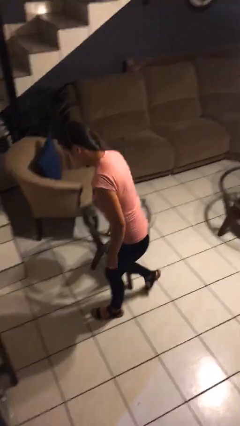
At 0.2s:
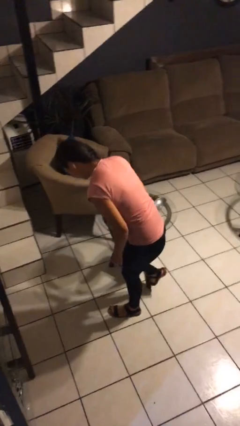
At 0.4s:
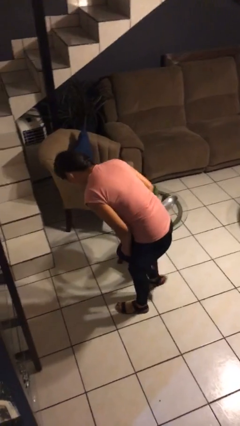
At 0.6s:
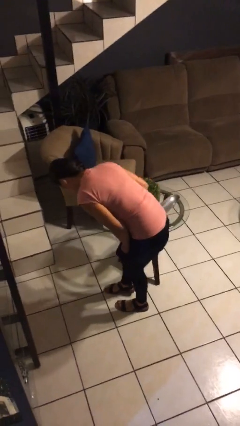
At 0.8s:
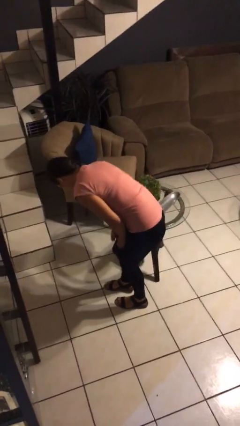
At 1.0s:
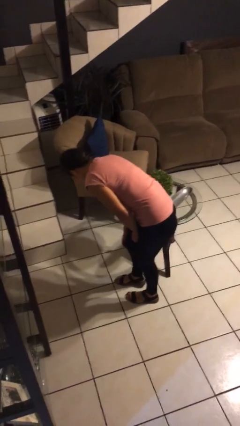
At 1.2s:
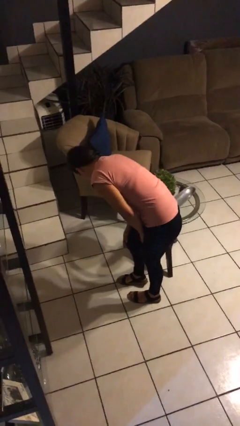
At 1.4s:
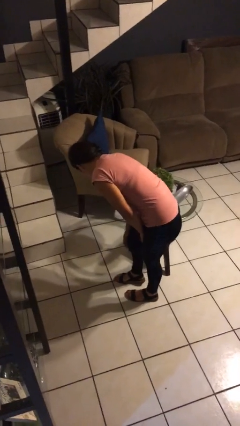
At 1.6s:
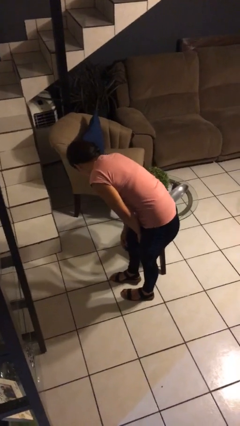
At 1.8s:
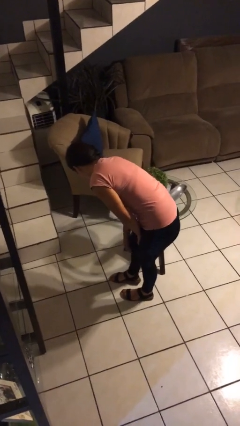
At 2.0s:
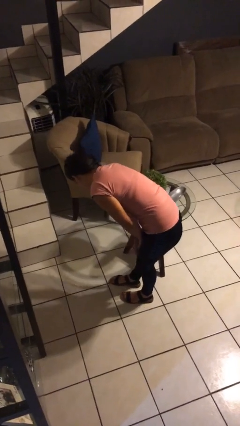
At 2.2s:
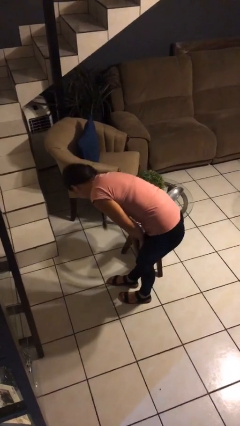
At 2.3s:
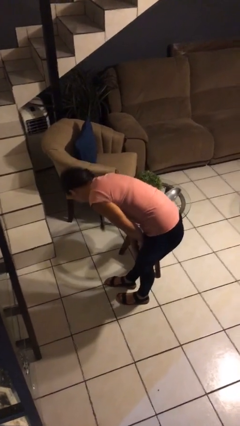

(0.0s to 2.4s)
person bumps into table

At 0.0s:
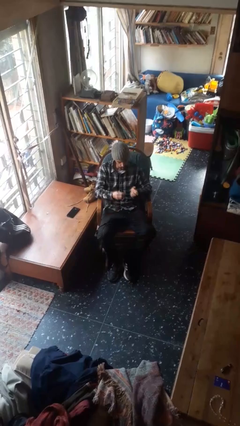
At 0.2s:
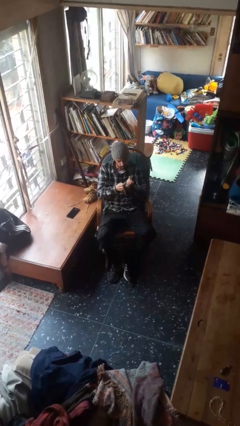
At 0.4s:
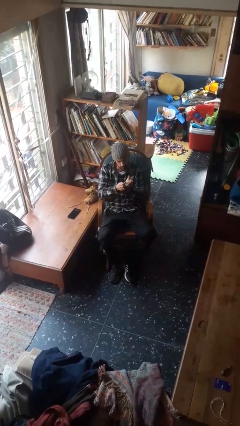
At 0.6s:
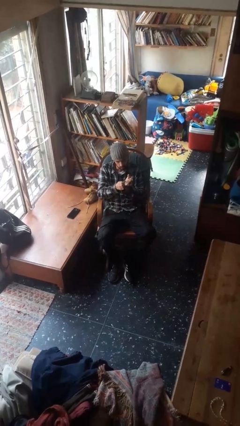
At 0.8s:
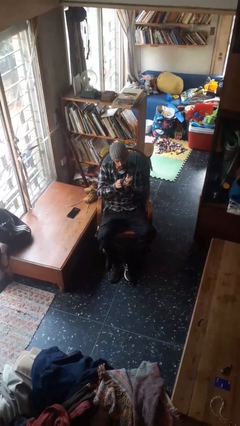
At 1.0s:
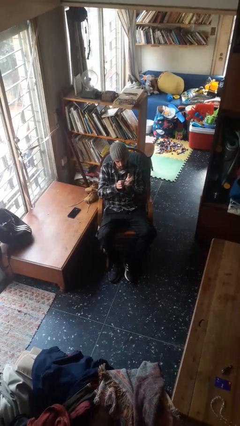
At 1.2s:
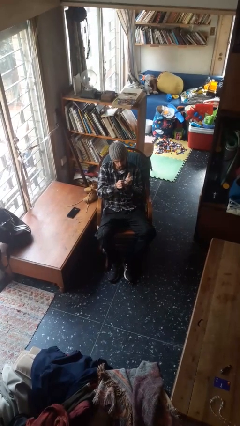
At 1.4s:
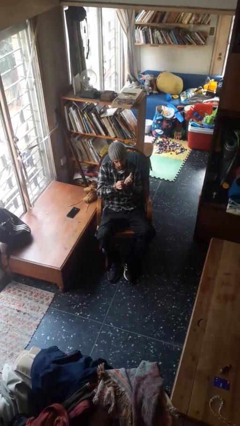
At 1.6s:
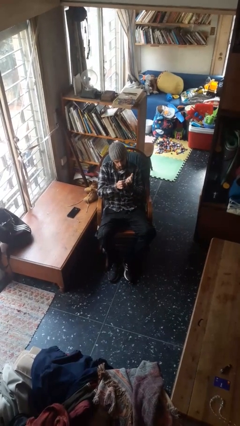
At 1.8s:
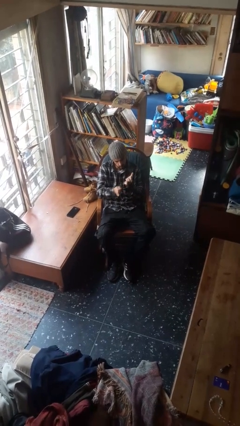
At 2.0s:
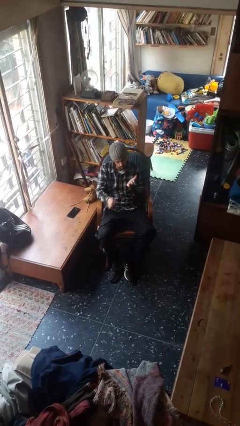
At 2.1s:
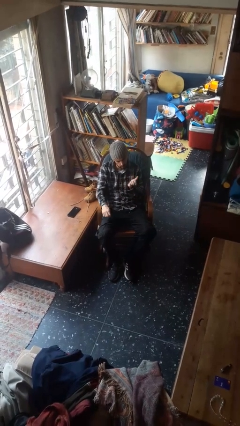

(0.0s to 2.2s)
person files fingernails

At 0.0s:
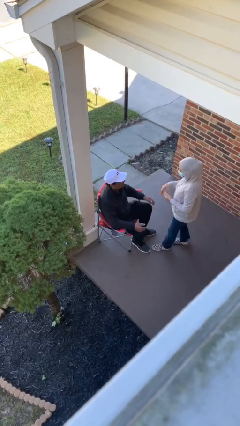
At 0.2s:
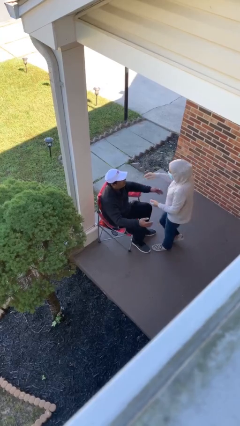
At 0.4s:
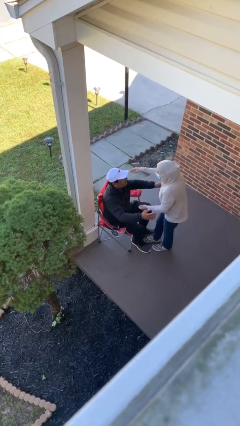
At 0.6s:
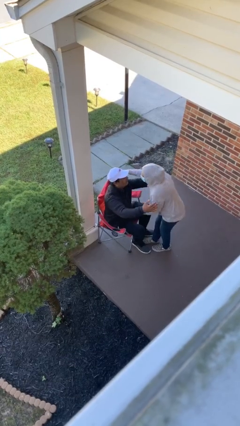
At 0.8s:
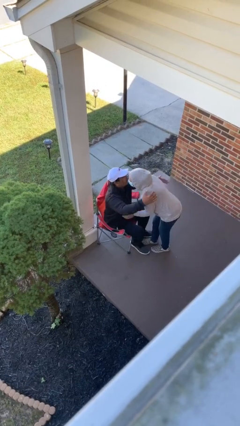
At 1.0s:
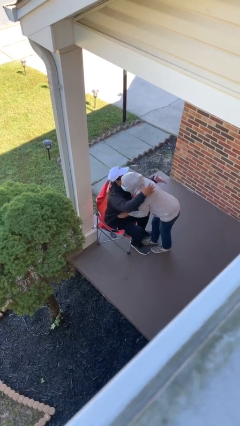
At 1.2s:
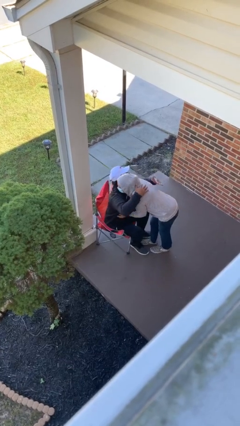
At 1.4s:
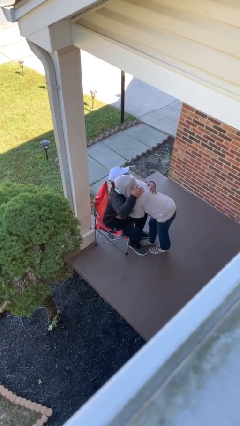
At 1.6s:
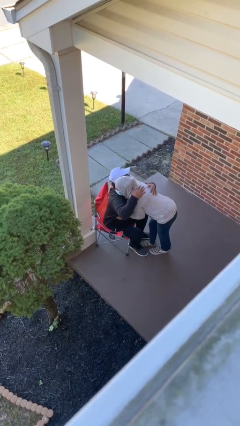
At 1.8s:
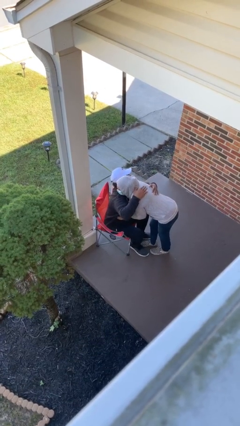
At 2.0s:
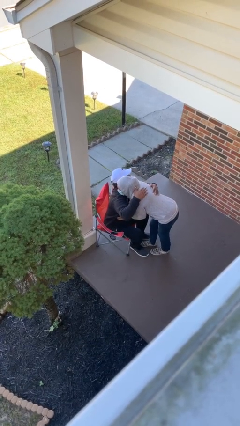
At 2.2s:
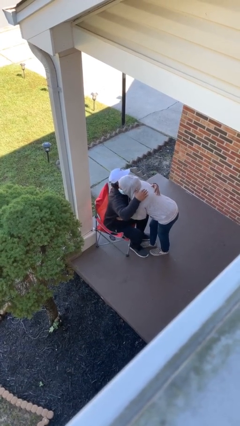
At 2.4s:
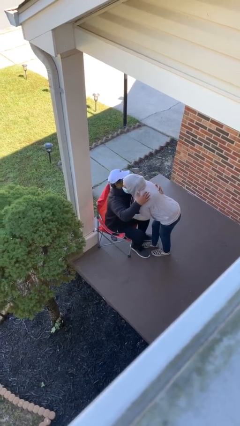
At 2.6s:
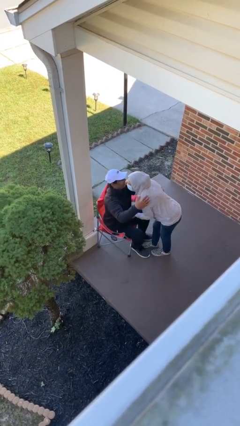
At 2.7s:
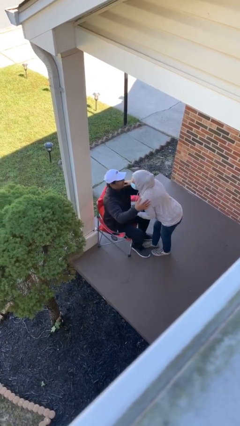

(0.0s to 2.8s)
person embraces person

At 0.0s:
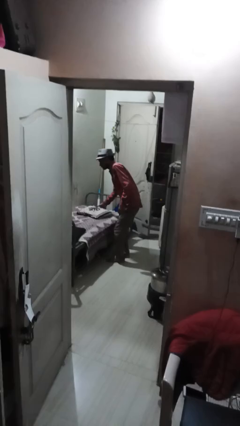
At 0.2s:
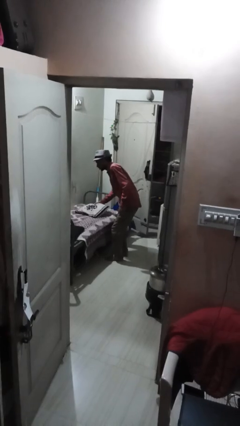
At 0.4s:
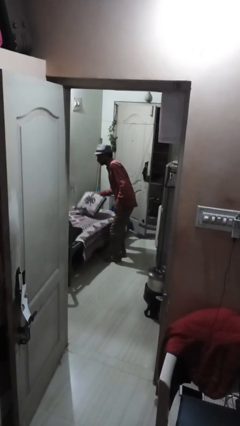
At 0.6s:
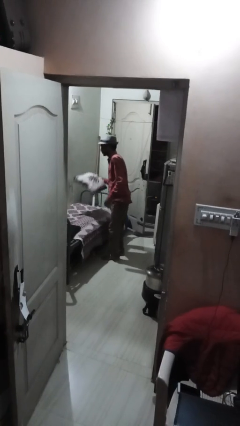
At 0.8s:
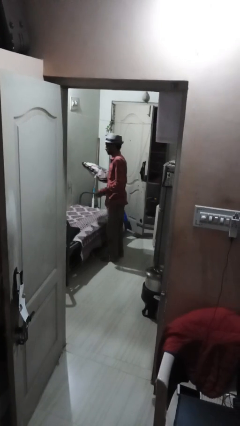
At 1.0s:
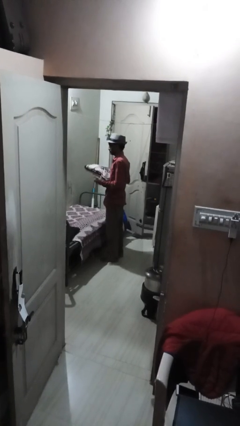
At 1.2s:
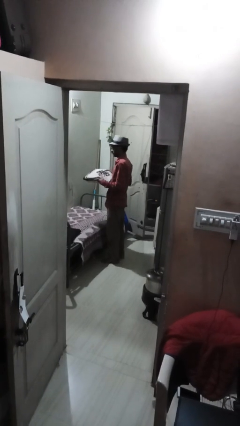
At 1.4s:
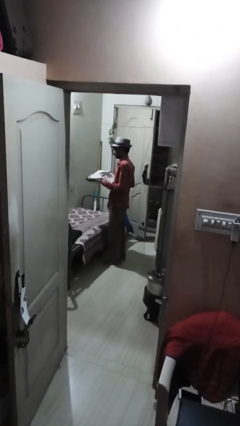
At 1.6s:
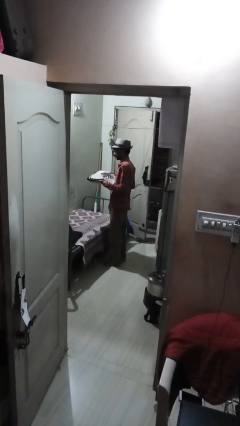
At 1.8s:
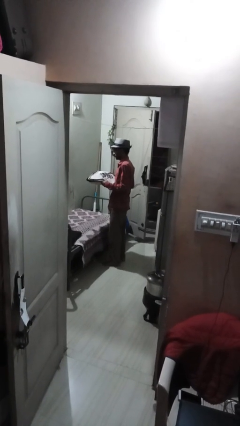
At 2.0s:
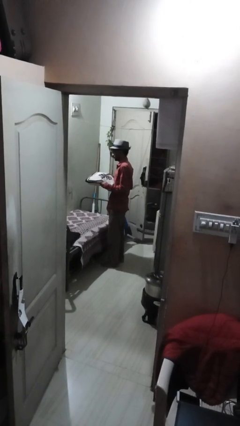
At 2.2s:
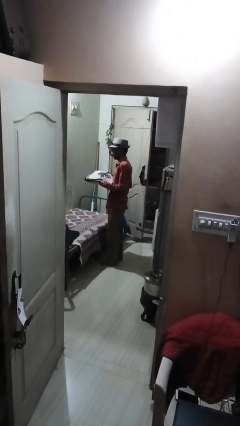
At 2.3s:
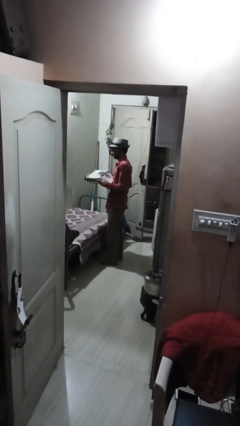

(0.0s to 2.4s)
person picks up object from bed

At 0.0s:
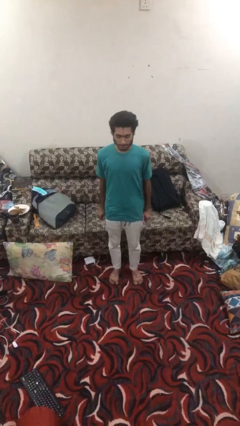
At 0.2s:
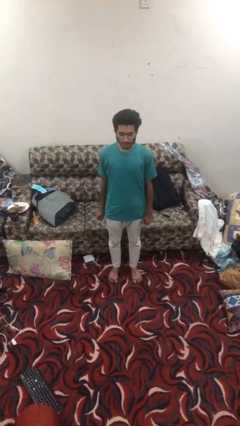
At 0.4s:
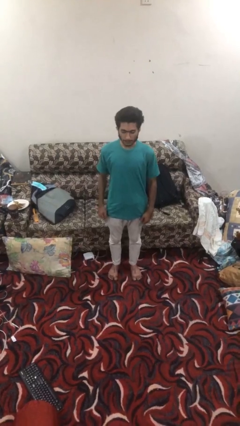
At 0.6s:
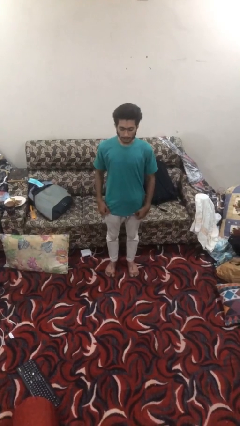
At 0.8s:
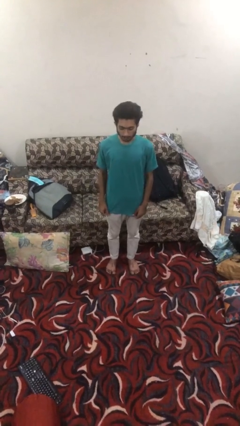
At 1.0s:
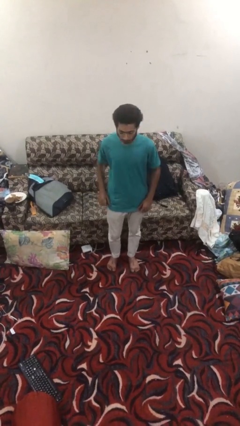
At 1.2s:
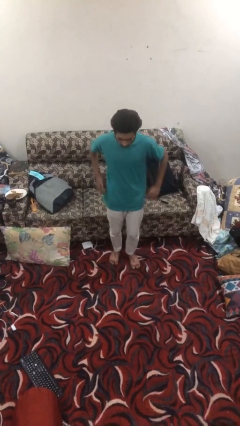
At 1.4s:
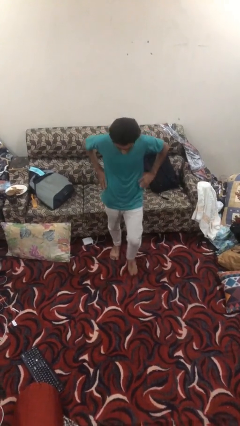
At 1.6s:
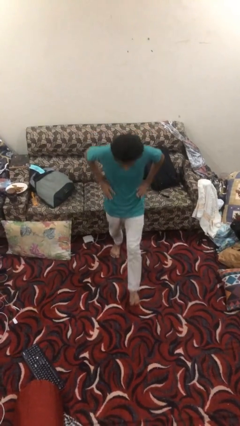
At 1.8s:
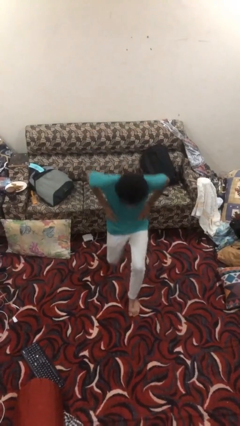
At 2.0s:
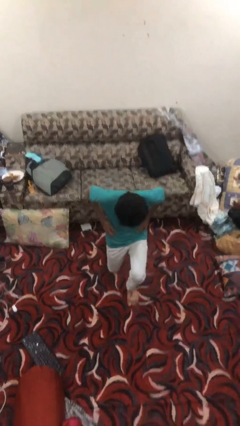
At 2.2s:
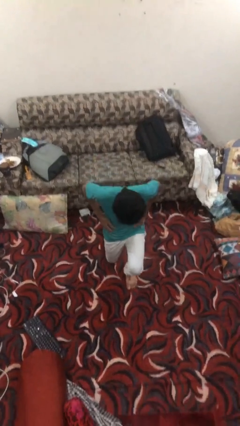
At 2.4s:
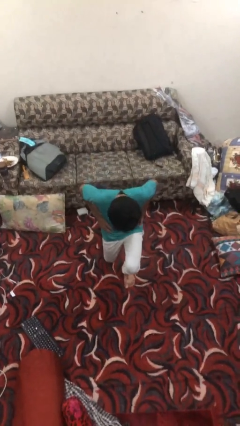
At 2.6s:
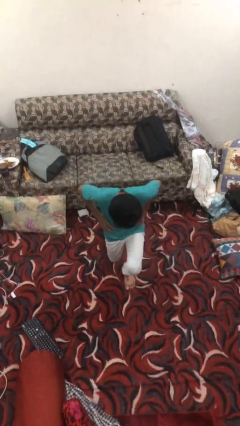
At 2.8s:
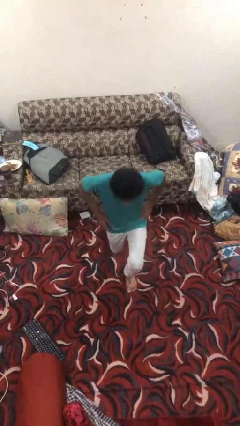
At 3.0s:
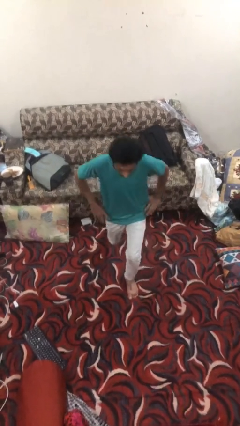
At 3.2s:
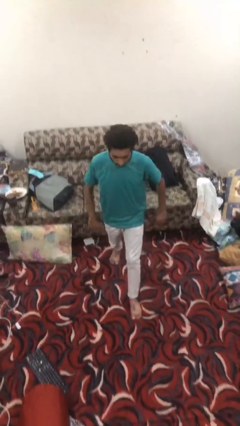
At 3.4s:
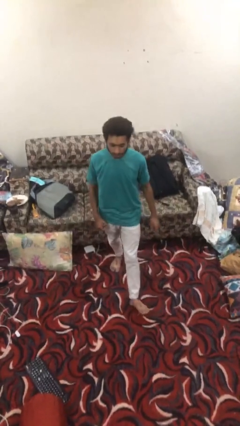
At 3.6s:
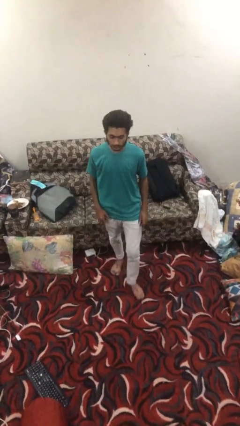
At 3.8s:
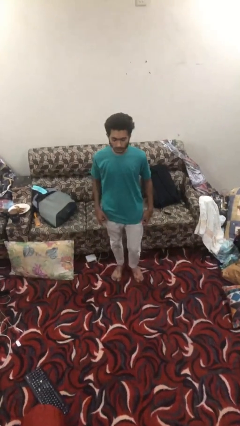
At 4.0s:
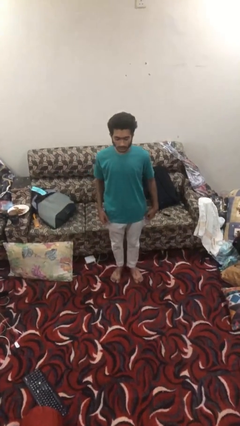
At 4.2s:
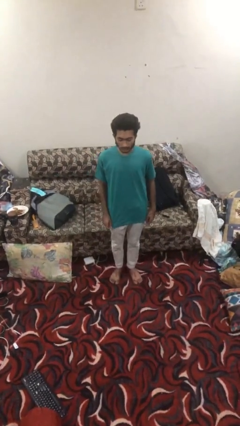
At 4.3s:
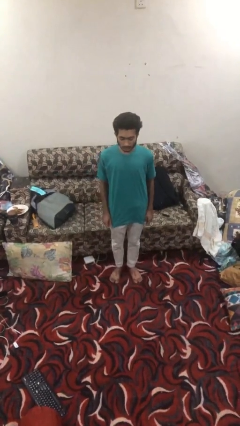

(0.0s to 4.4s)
person exercises with lunges

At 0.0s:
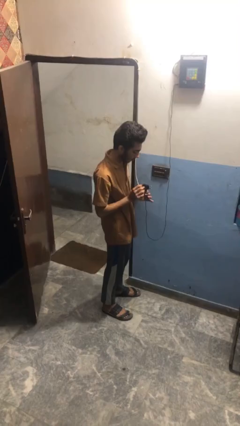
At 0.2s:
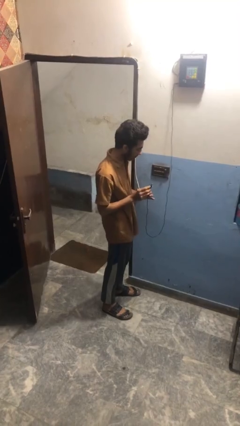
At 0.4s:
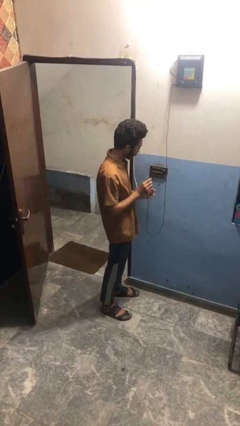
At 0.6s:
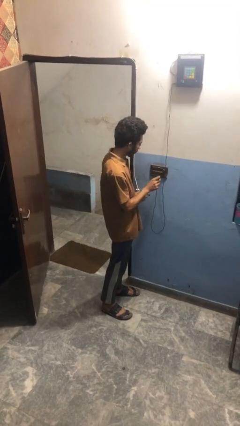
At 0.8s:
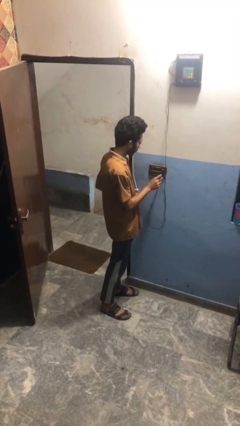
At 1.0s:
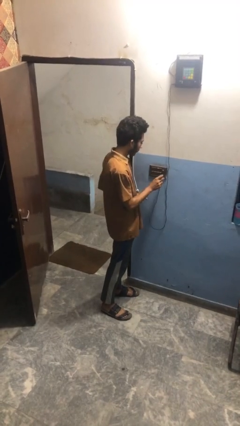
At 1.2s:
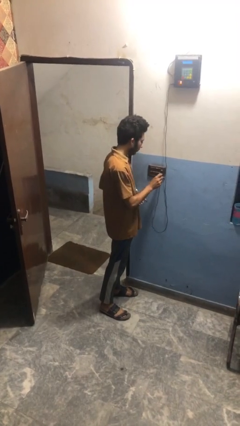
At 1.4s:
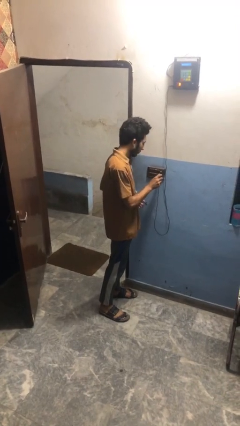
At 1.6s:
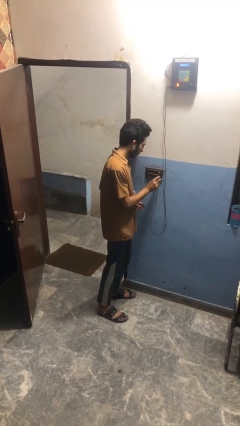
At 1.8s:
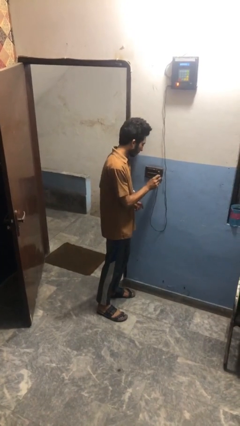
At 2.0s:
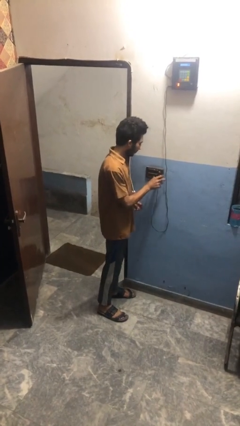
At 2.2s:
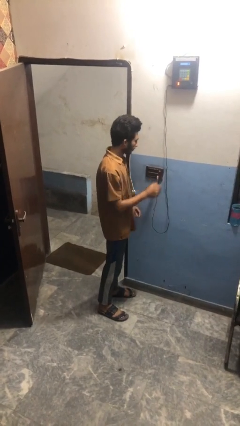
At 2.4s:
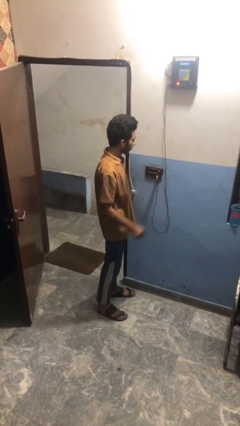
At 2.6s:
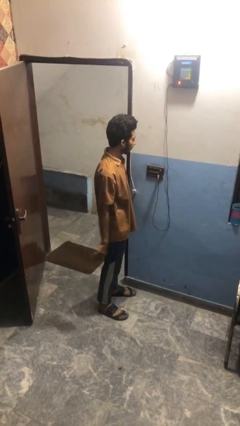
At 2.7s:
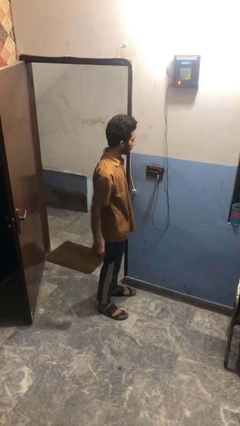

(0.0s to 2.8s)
person plugs into electrical socket

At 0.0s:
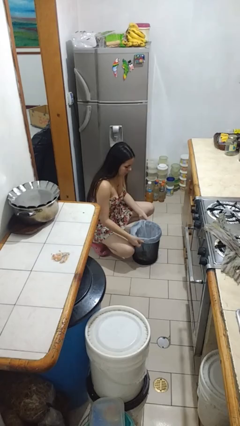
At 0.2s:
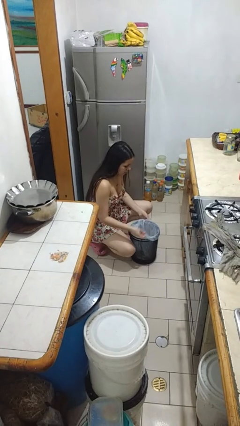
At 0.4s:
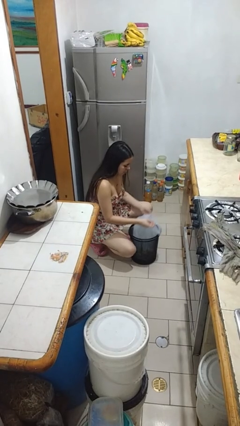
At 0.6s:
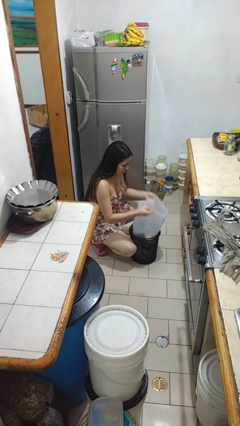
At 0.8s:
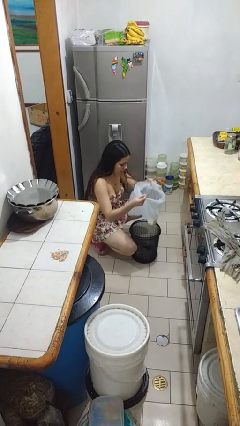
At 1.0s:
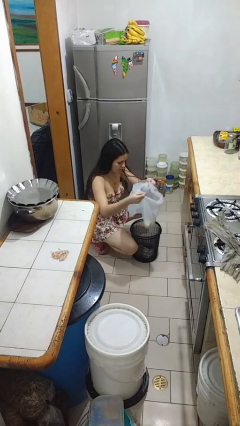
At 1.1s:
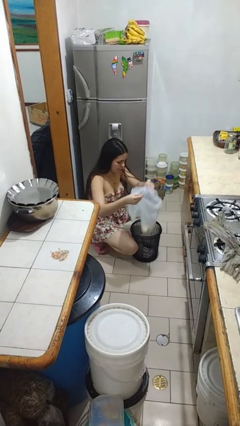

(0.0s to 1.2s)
person removes trashbag from trashcan
